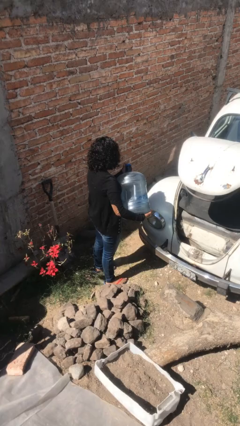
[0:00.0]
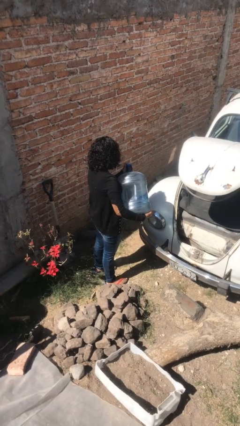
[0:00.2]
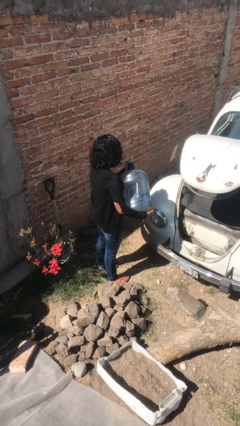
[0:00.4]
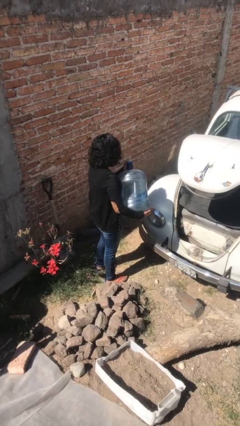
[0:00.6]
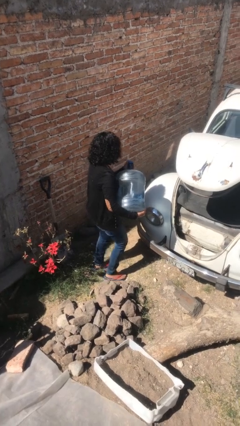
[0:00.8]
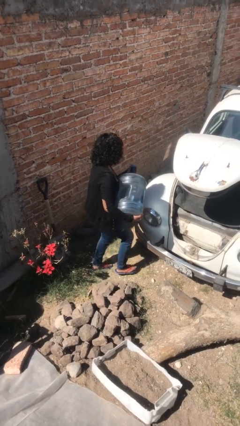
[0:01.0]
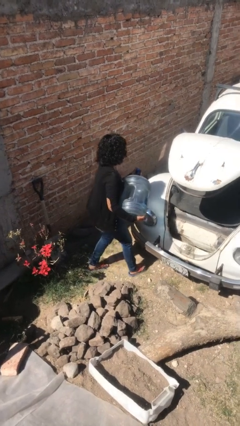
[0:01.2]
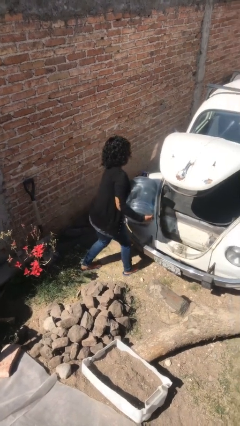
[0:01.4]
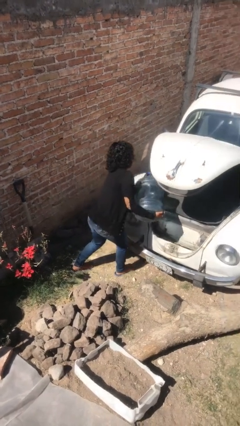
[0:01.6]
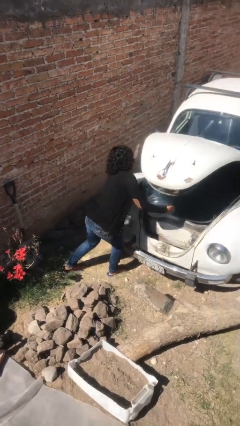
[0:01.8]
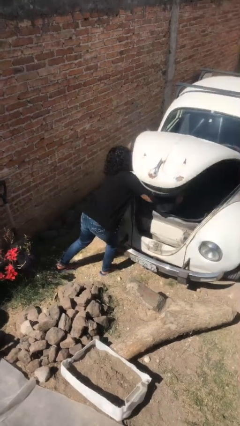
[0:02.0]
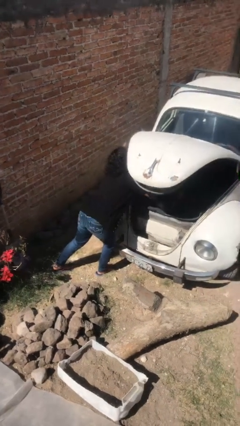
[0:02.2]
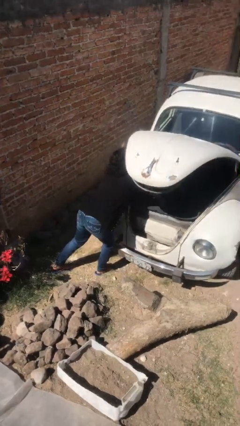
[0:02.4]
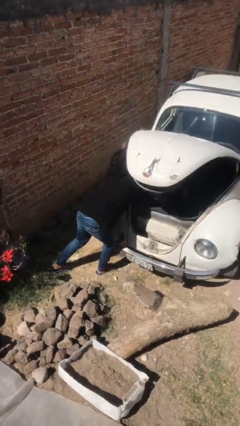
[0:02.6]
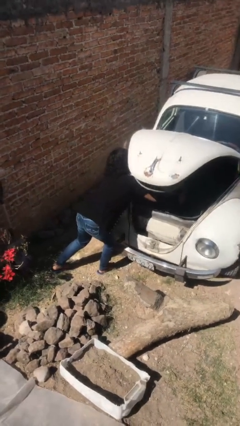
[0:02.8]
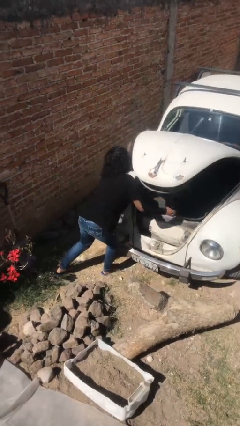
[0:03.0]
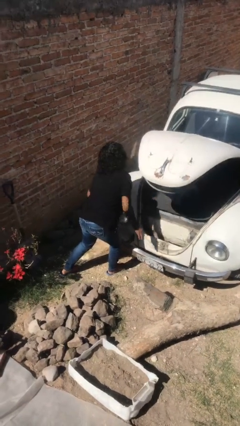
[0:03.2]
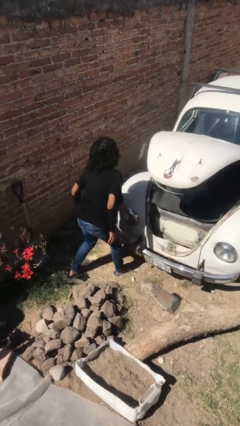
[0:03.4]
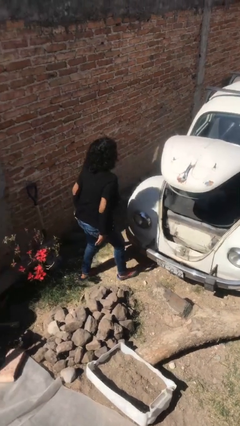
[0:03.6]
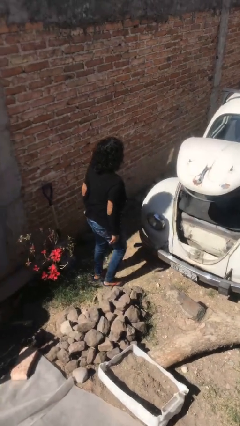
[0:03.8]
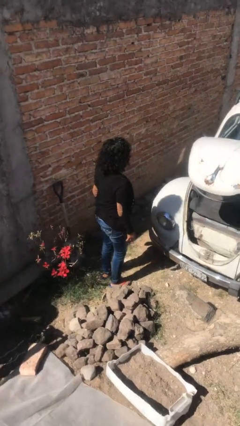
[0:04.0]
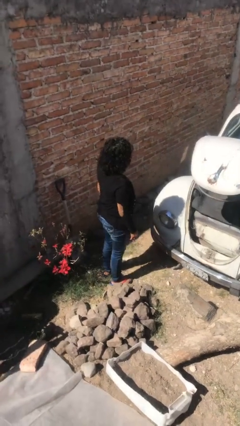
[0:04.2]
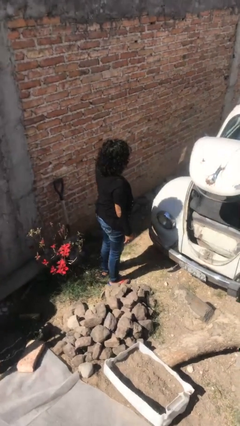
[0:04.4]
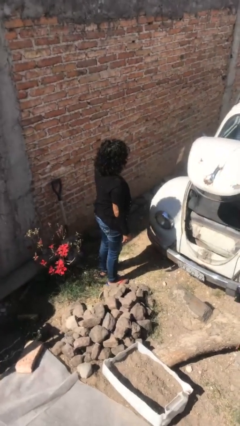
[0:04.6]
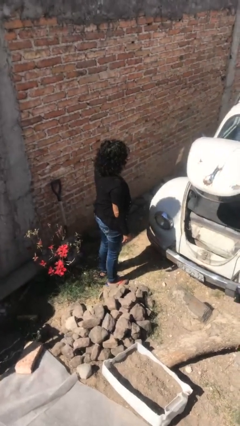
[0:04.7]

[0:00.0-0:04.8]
person loads car

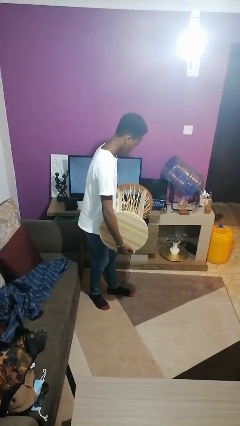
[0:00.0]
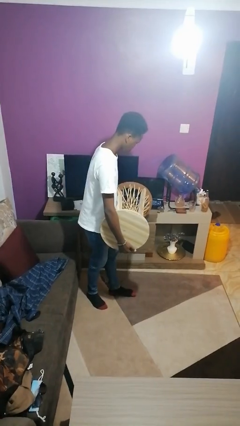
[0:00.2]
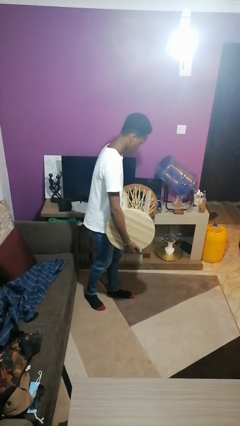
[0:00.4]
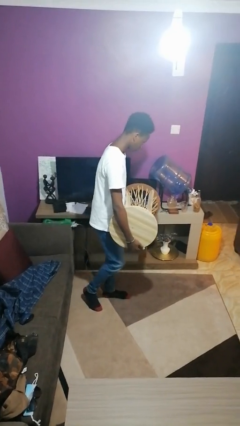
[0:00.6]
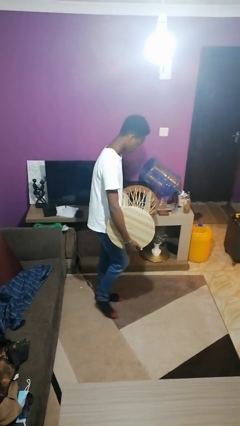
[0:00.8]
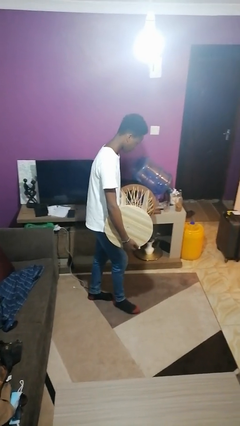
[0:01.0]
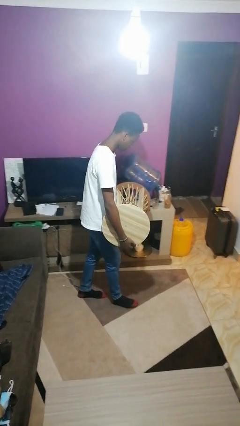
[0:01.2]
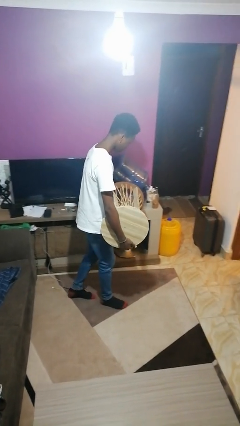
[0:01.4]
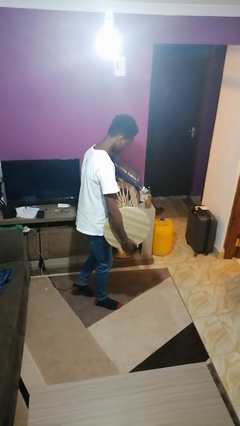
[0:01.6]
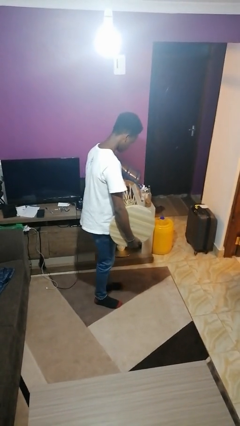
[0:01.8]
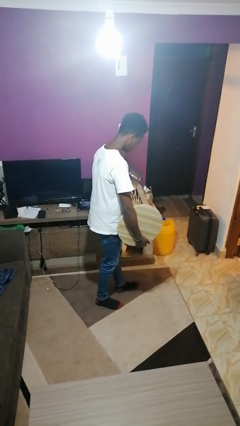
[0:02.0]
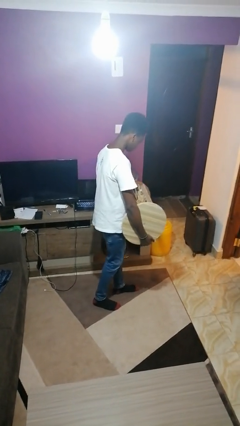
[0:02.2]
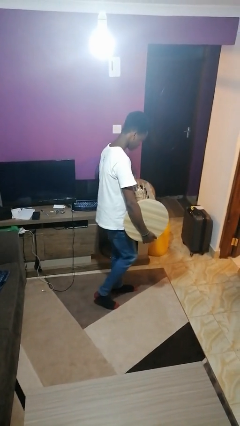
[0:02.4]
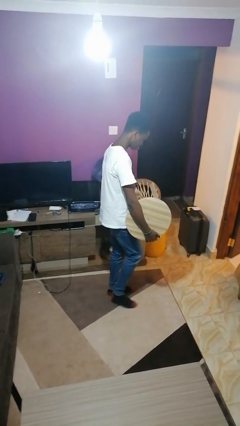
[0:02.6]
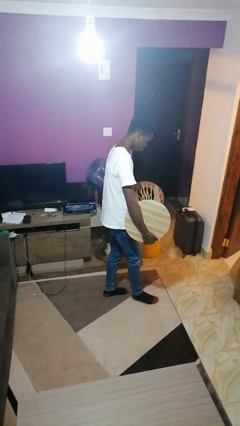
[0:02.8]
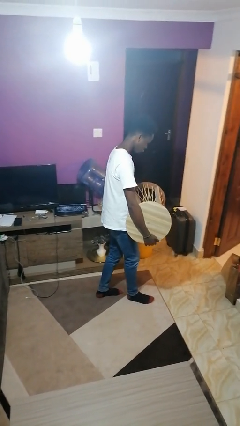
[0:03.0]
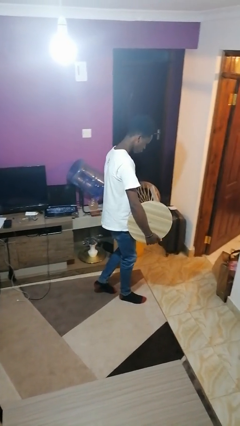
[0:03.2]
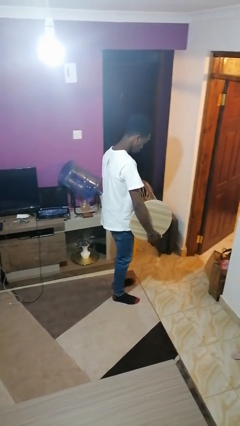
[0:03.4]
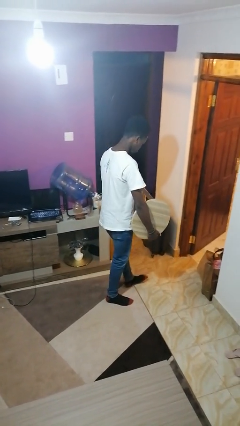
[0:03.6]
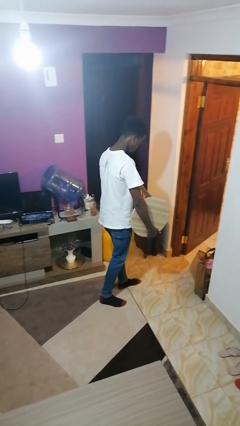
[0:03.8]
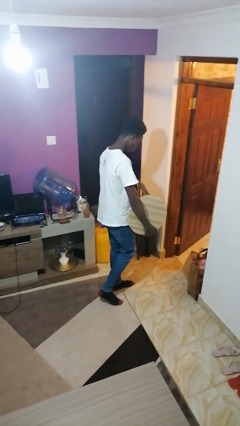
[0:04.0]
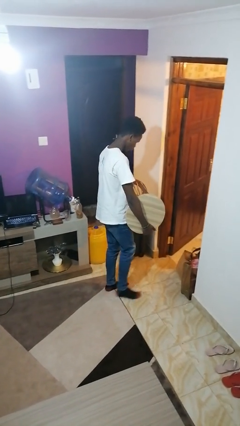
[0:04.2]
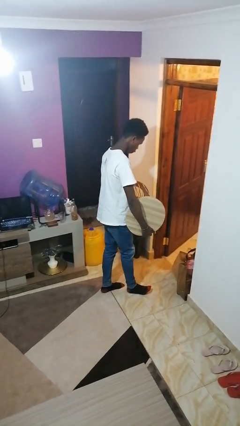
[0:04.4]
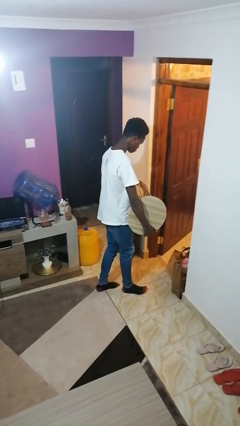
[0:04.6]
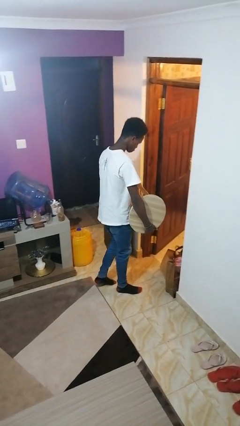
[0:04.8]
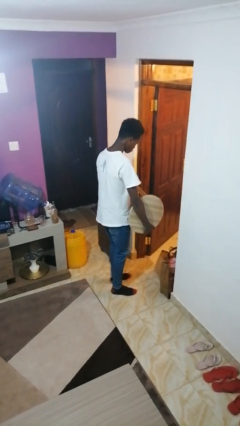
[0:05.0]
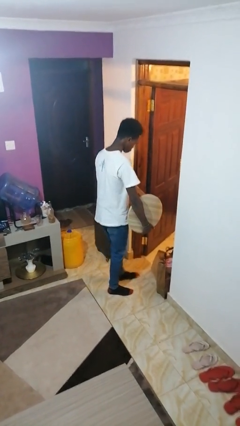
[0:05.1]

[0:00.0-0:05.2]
person carries furniture

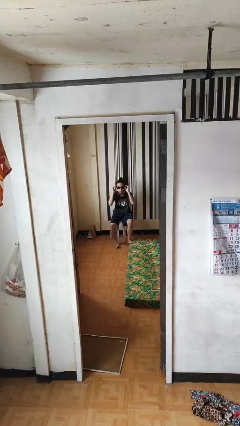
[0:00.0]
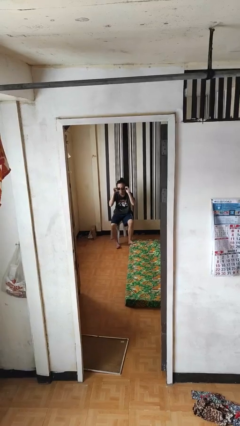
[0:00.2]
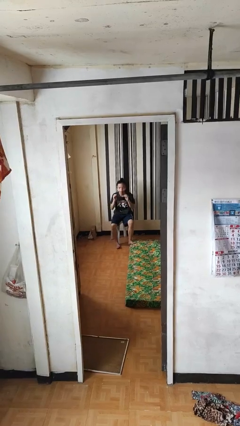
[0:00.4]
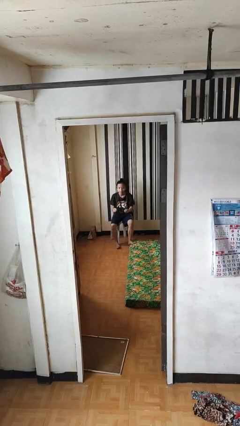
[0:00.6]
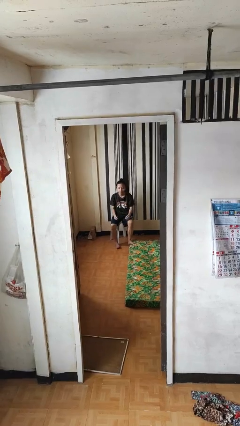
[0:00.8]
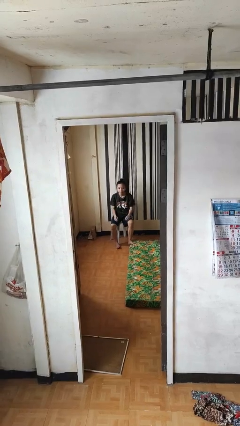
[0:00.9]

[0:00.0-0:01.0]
person takes off sunglasses

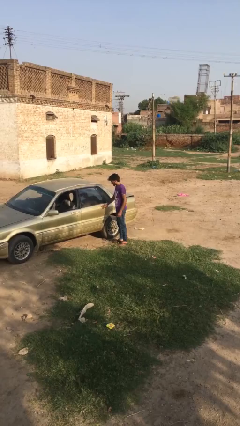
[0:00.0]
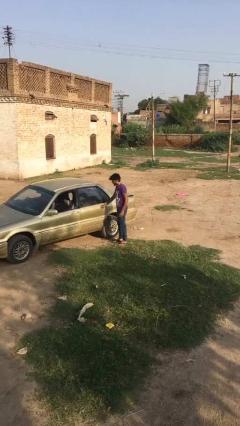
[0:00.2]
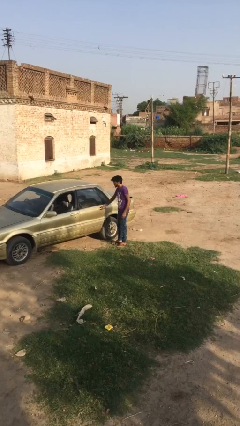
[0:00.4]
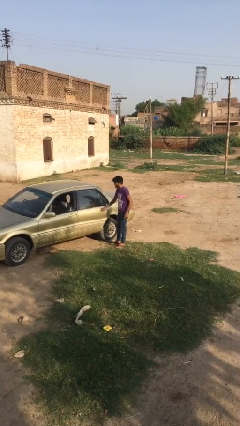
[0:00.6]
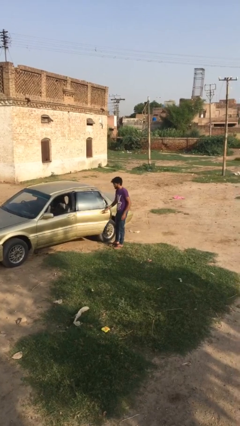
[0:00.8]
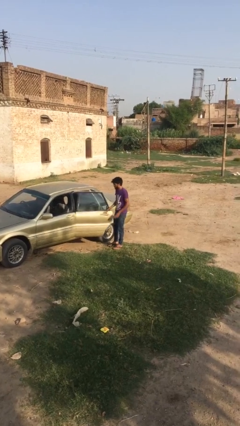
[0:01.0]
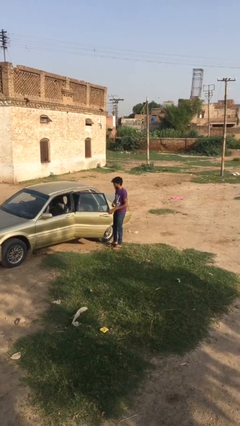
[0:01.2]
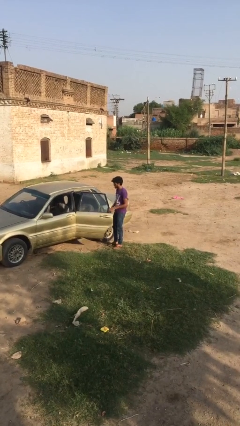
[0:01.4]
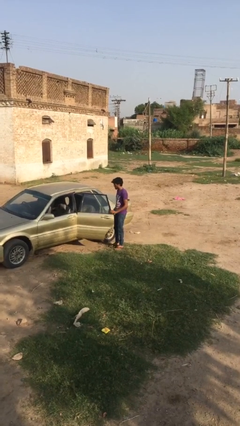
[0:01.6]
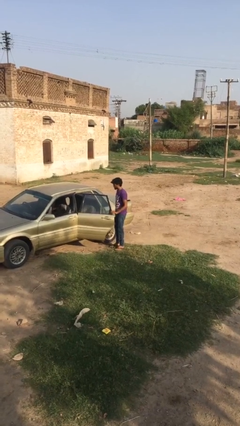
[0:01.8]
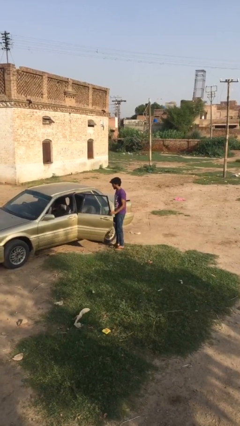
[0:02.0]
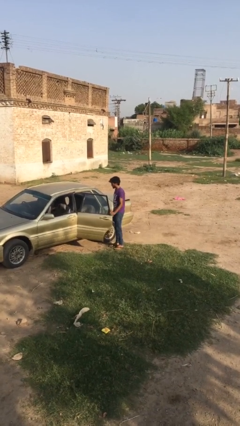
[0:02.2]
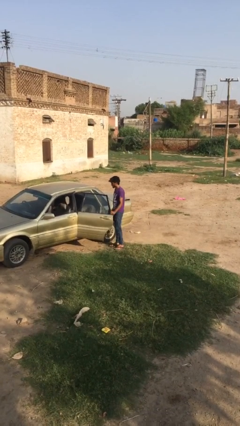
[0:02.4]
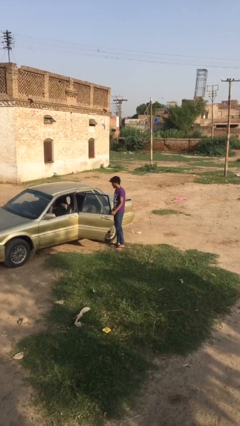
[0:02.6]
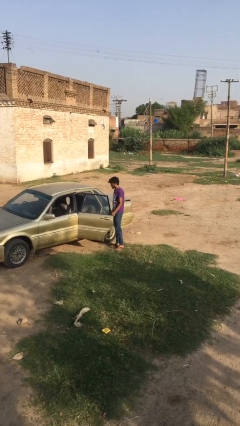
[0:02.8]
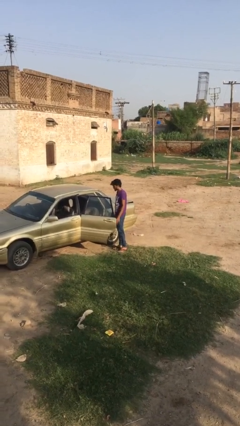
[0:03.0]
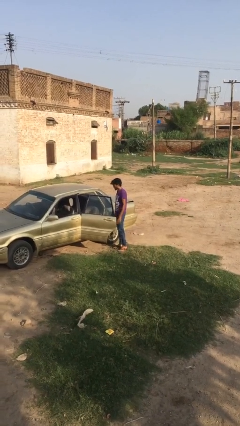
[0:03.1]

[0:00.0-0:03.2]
person opens car door

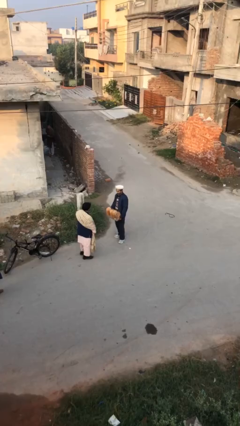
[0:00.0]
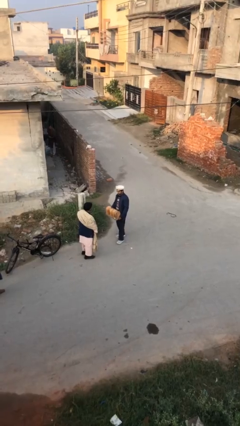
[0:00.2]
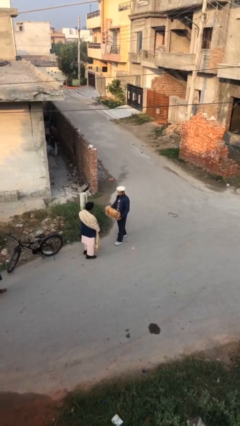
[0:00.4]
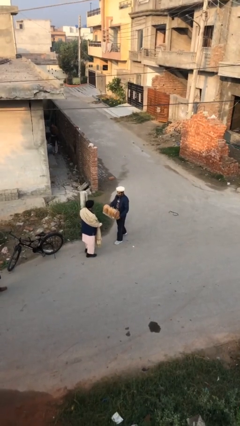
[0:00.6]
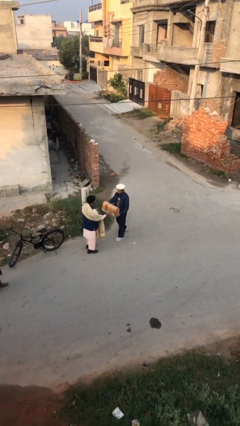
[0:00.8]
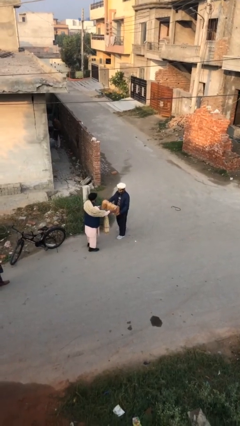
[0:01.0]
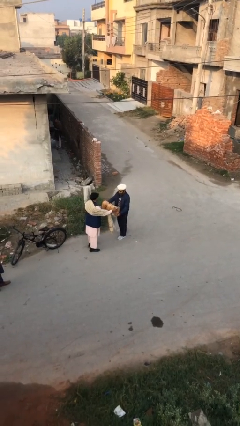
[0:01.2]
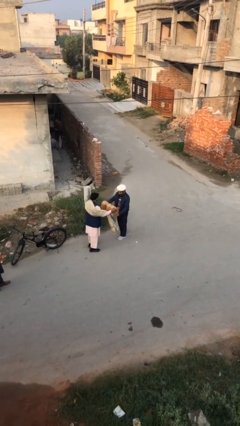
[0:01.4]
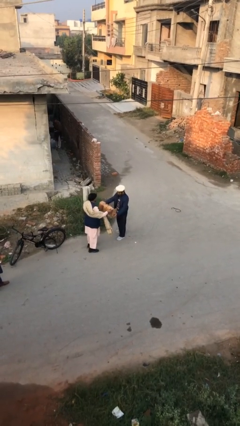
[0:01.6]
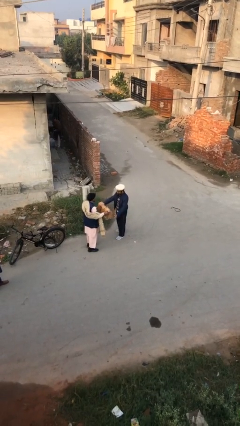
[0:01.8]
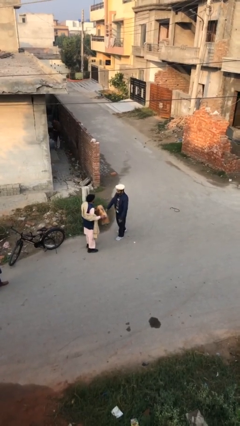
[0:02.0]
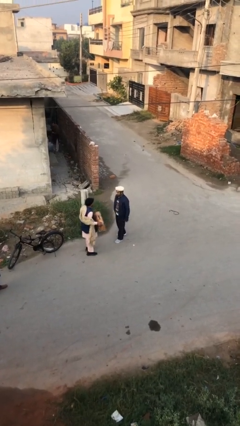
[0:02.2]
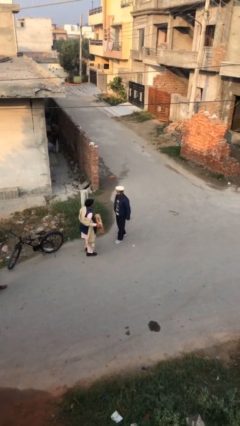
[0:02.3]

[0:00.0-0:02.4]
person transfers object to person

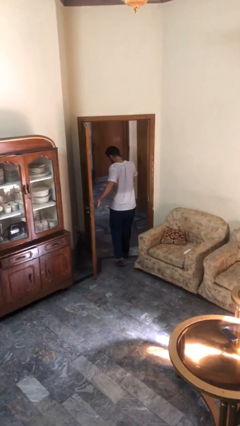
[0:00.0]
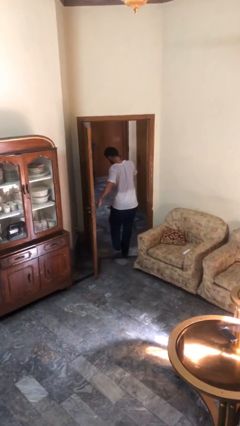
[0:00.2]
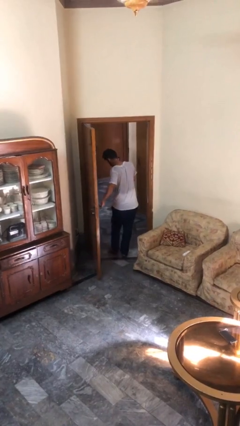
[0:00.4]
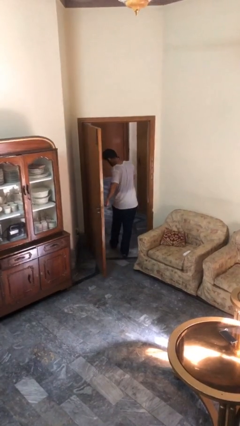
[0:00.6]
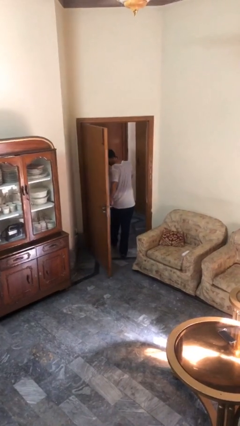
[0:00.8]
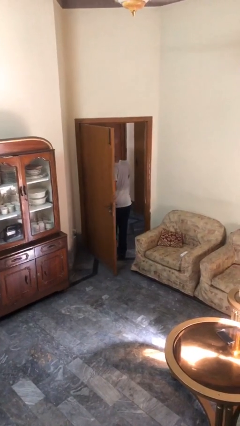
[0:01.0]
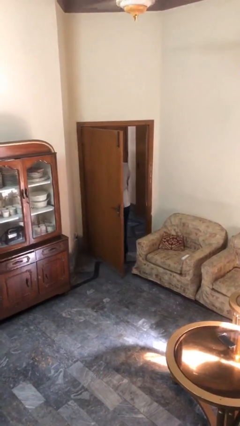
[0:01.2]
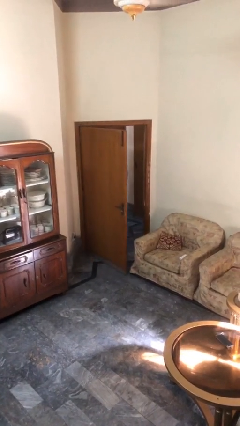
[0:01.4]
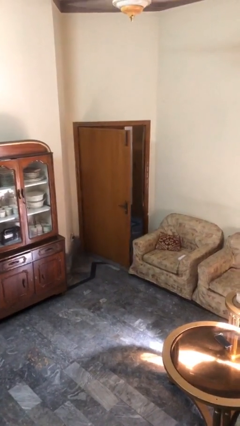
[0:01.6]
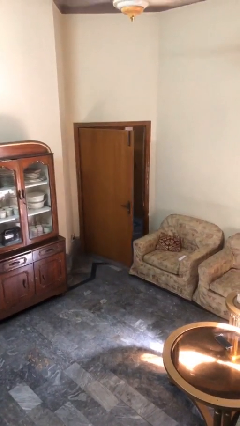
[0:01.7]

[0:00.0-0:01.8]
person closes facility door
